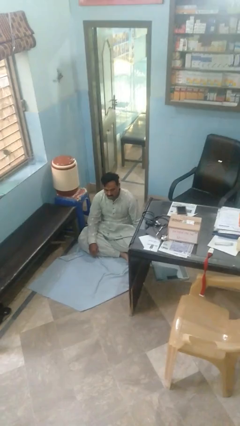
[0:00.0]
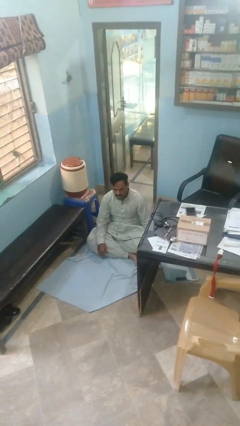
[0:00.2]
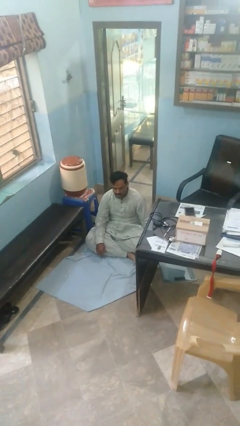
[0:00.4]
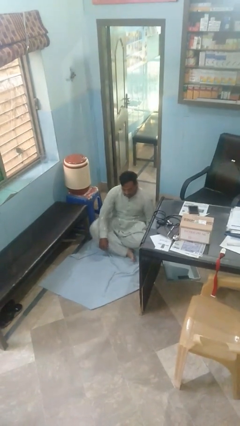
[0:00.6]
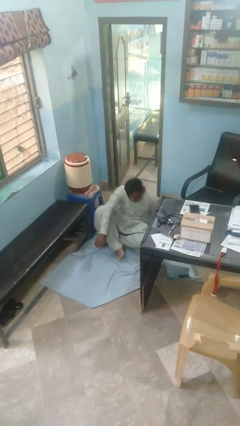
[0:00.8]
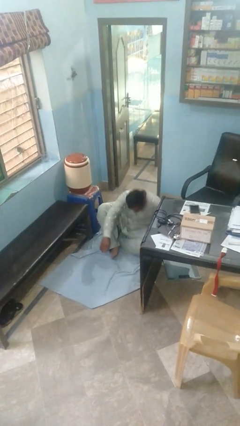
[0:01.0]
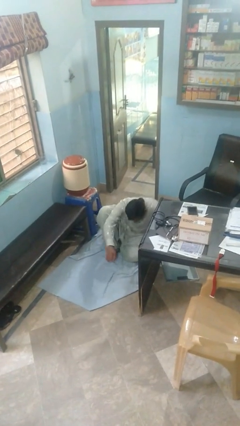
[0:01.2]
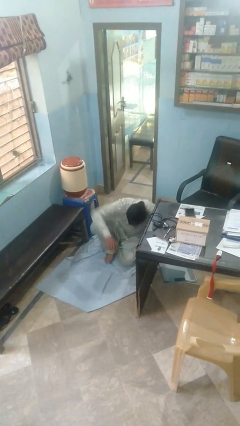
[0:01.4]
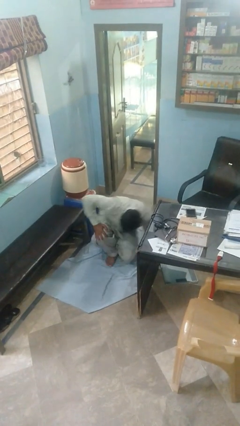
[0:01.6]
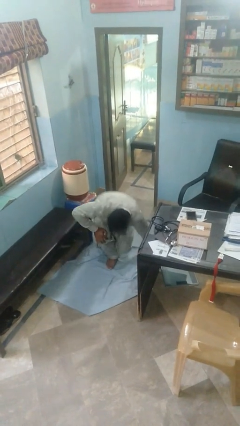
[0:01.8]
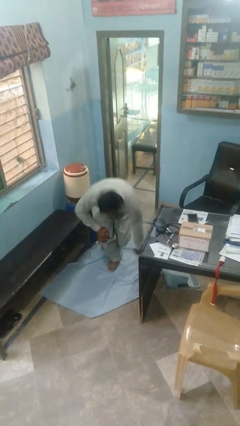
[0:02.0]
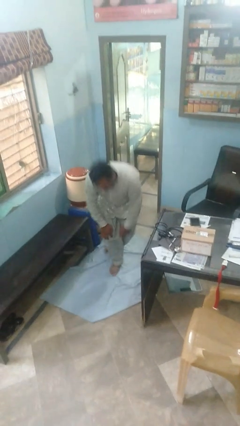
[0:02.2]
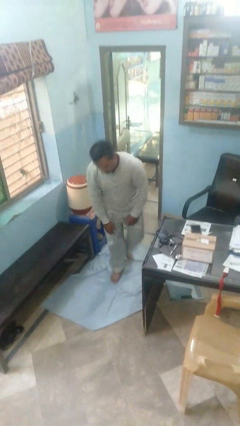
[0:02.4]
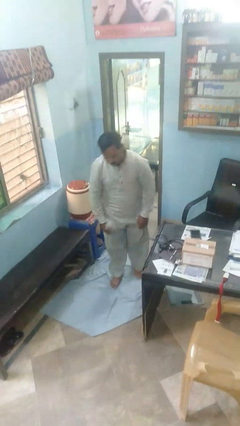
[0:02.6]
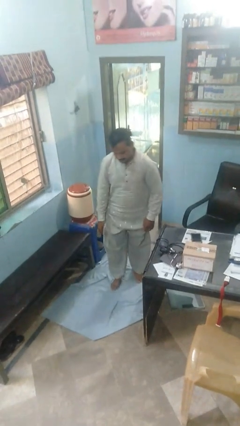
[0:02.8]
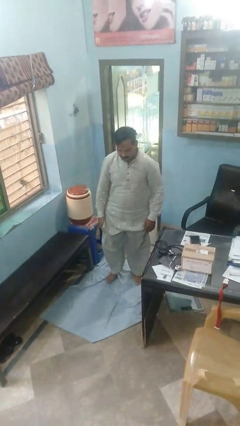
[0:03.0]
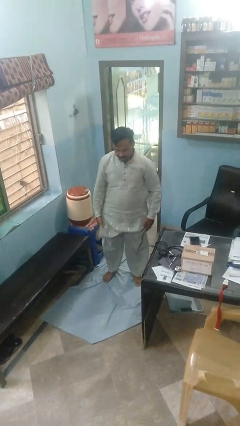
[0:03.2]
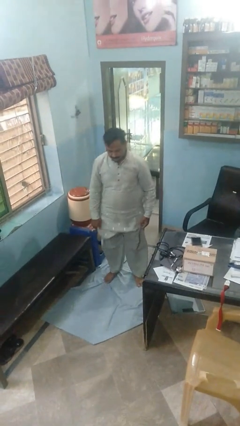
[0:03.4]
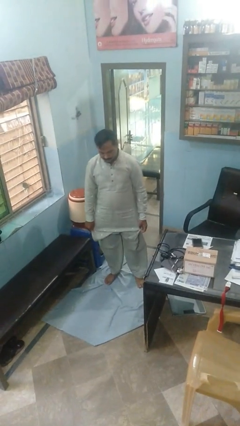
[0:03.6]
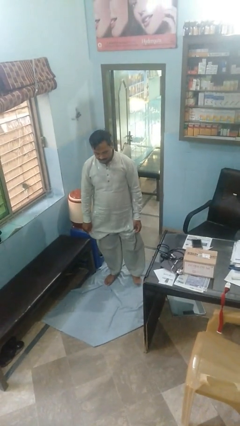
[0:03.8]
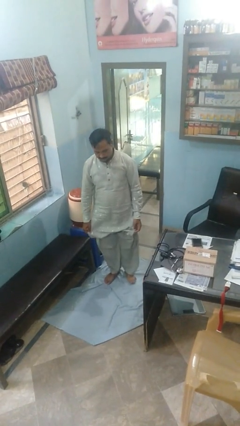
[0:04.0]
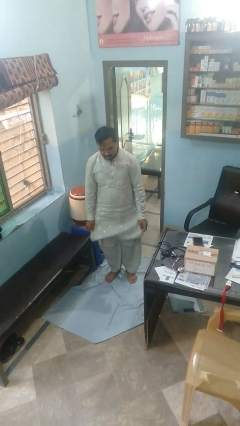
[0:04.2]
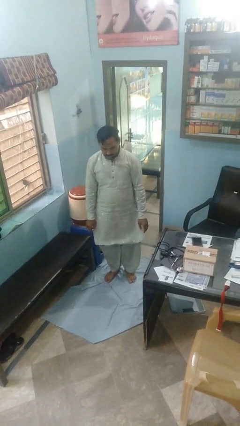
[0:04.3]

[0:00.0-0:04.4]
person stands up from floor

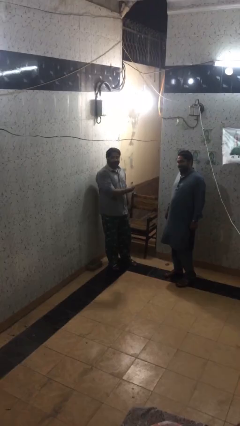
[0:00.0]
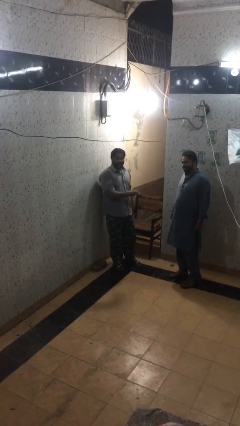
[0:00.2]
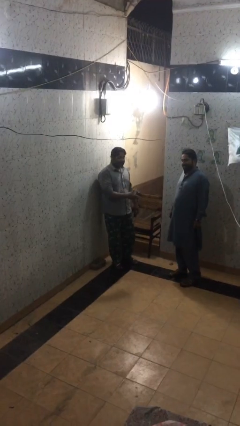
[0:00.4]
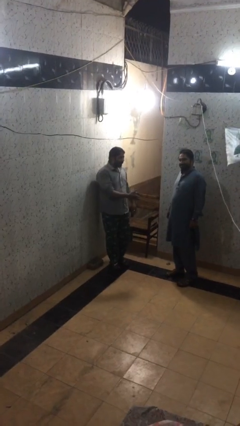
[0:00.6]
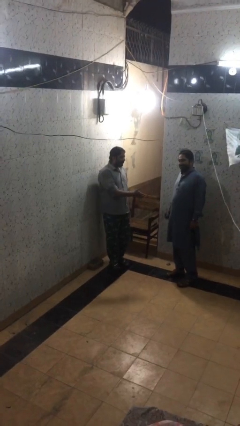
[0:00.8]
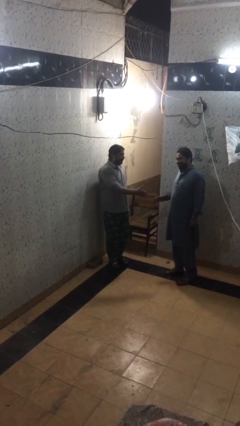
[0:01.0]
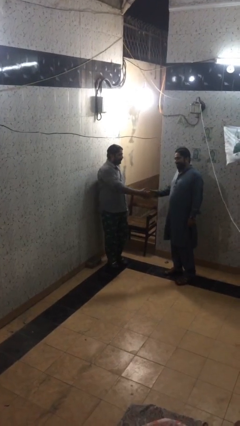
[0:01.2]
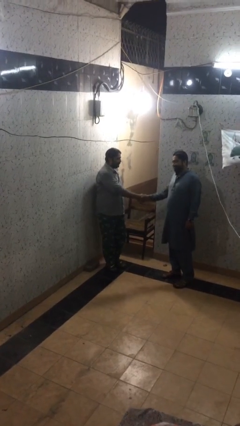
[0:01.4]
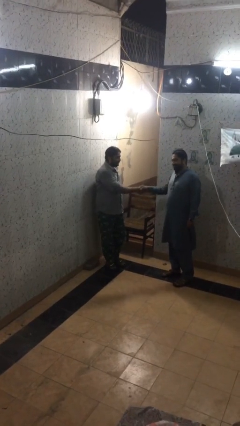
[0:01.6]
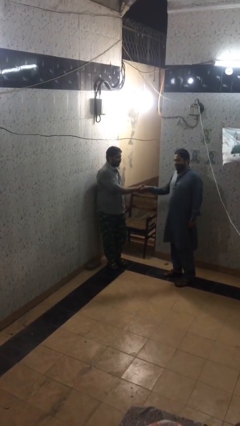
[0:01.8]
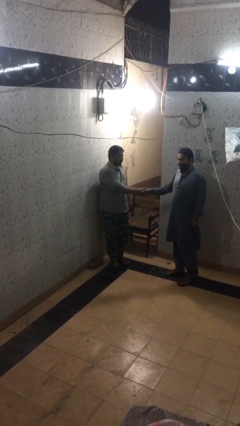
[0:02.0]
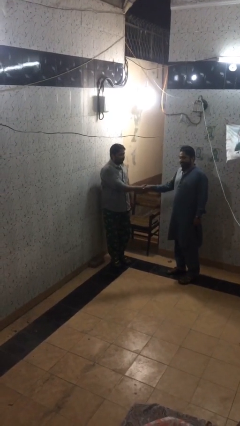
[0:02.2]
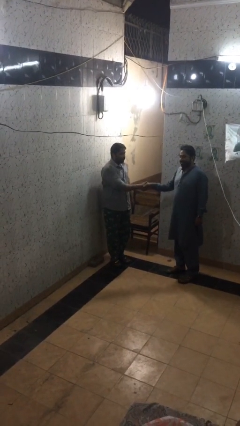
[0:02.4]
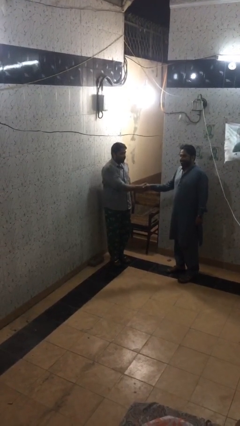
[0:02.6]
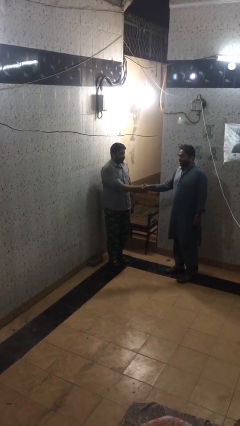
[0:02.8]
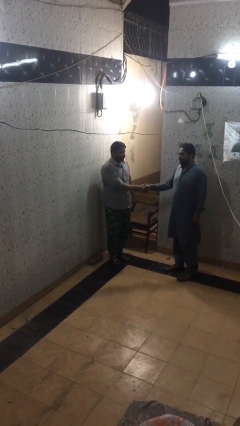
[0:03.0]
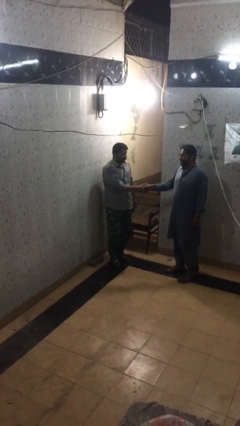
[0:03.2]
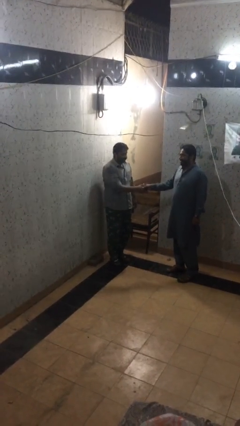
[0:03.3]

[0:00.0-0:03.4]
person shakes hand

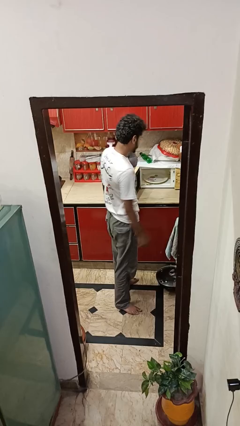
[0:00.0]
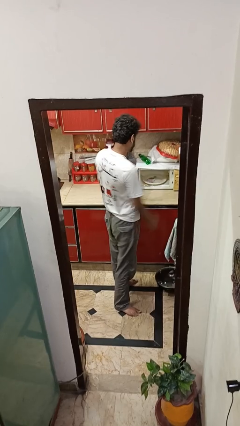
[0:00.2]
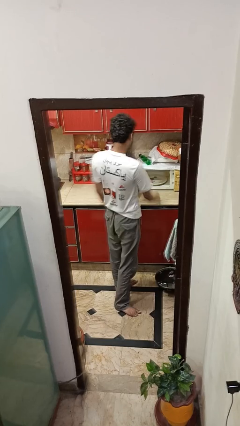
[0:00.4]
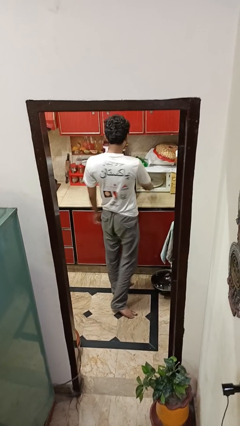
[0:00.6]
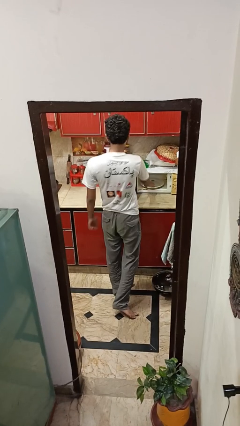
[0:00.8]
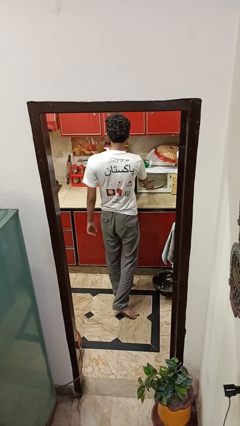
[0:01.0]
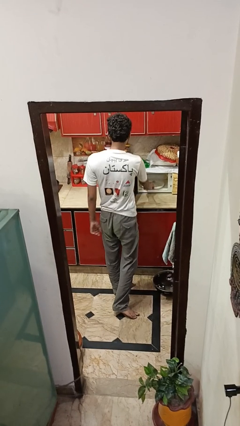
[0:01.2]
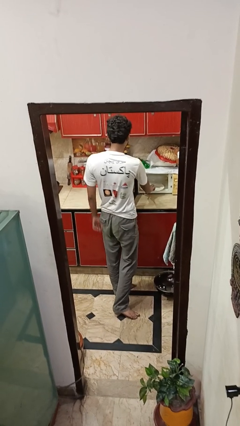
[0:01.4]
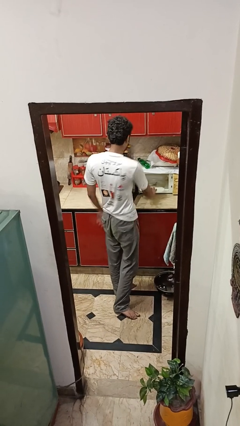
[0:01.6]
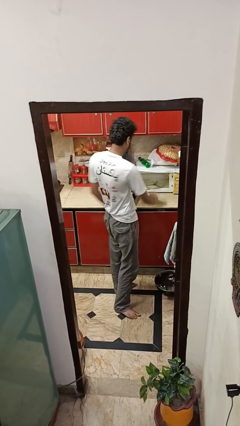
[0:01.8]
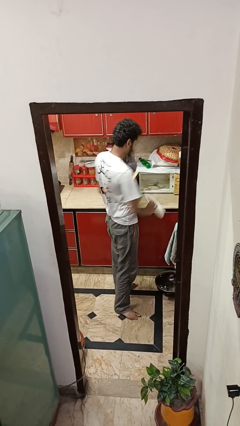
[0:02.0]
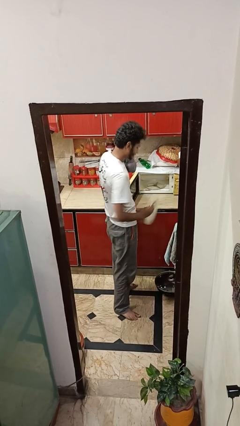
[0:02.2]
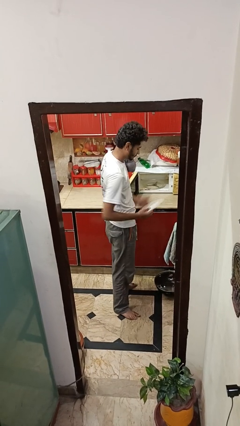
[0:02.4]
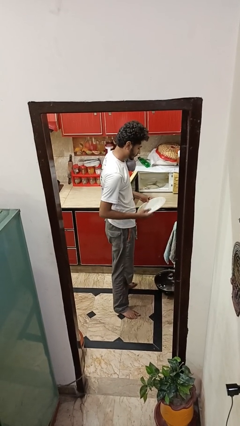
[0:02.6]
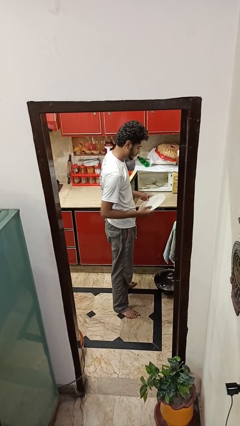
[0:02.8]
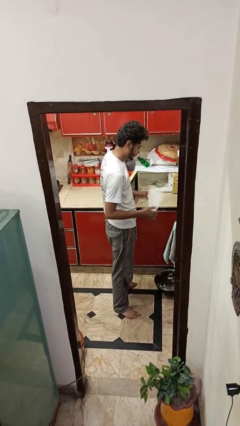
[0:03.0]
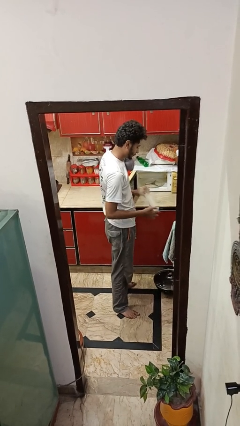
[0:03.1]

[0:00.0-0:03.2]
person takes object from oven

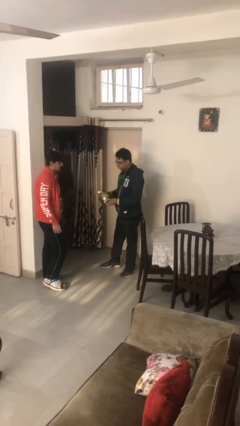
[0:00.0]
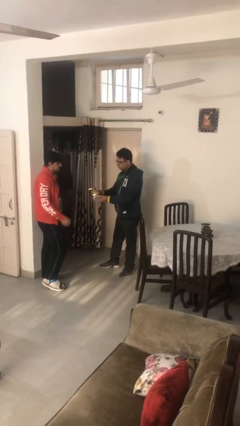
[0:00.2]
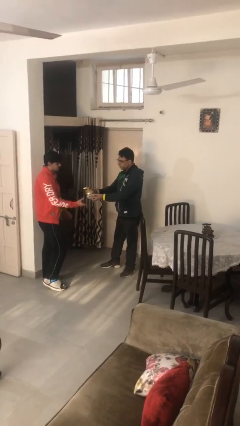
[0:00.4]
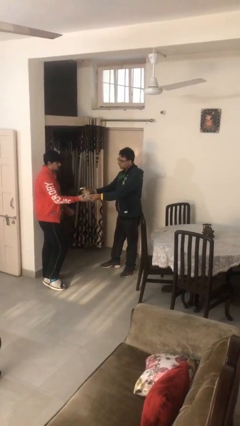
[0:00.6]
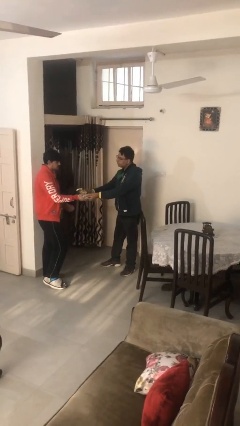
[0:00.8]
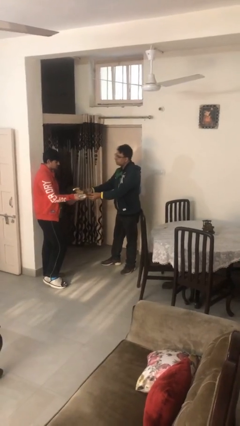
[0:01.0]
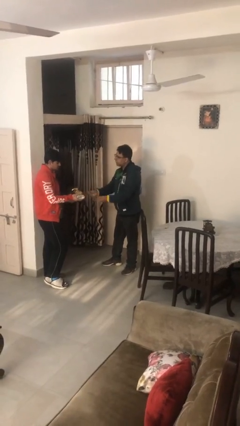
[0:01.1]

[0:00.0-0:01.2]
person transfers object to person

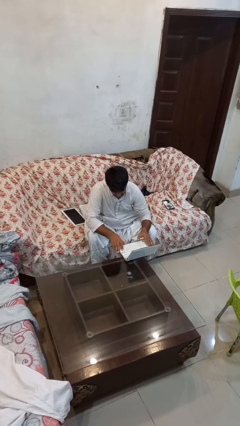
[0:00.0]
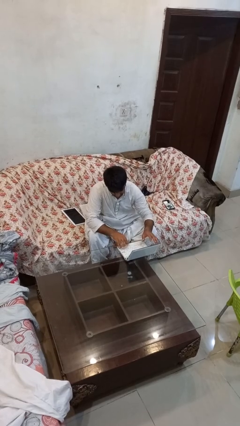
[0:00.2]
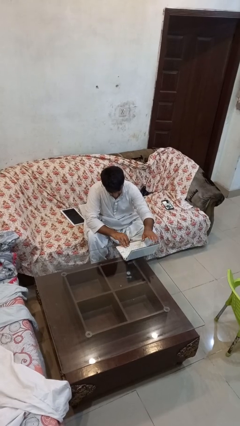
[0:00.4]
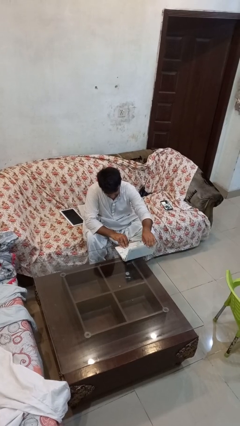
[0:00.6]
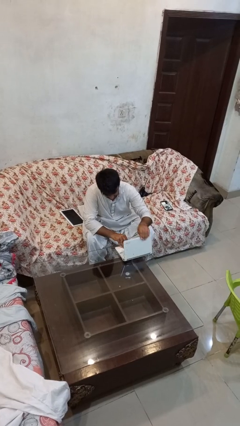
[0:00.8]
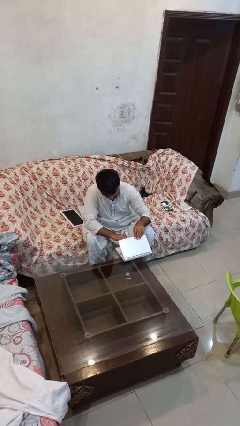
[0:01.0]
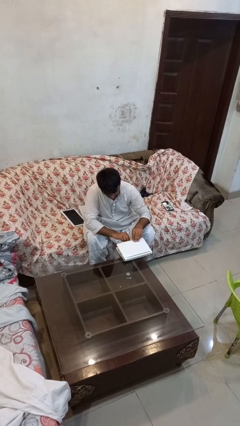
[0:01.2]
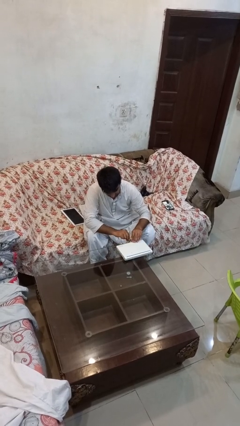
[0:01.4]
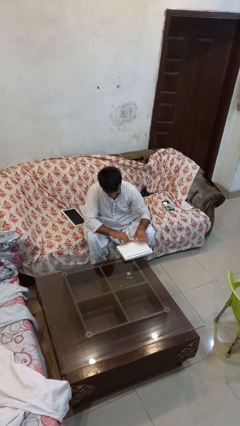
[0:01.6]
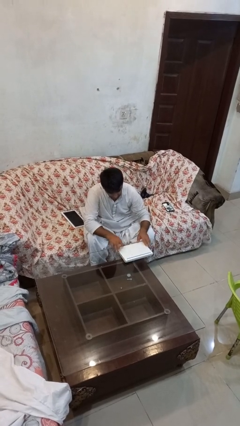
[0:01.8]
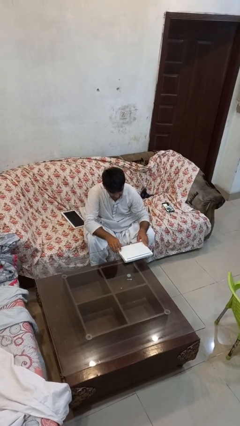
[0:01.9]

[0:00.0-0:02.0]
person closes laptop

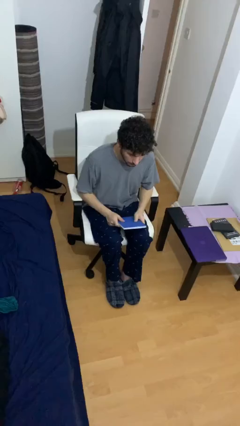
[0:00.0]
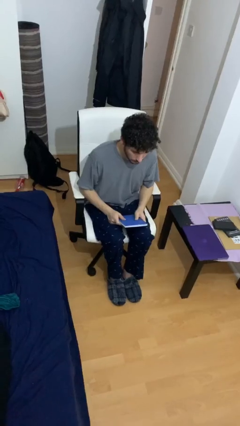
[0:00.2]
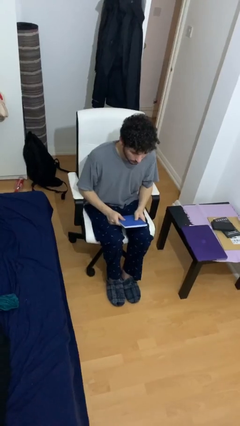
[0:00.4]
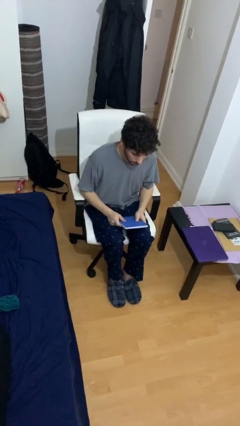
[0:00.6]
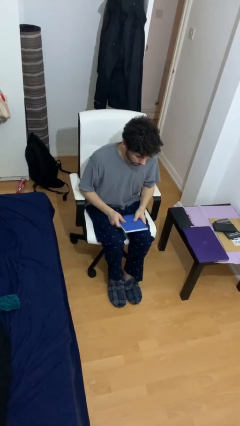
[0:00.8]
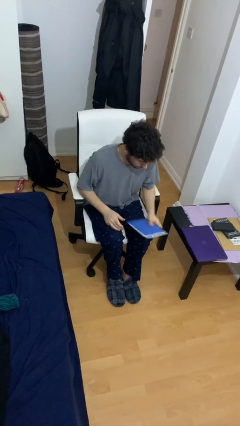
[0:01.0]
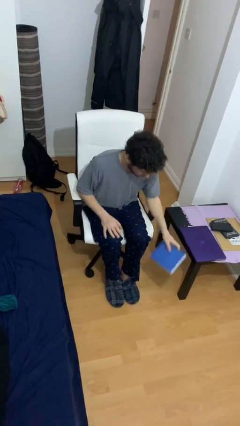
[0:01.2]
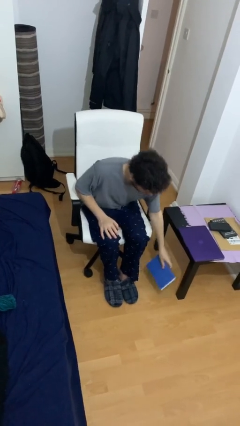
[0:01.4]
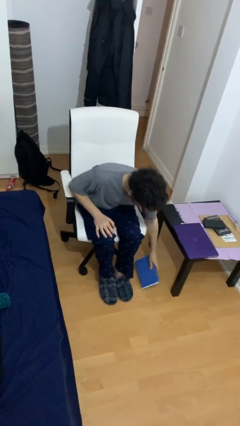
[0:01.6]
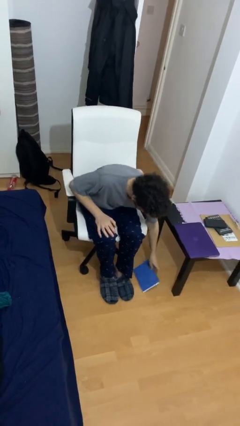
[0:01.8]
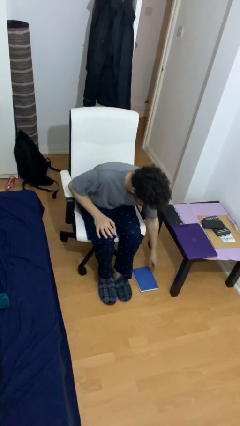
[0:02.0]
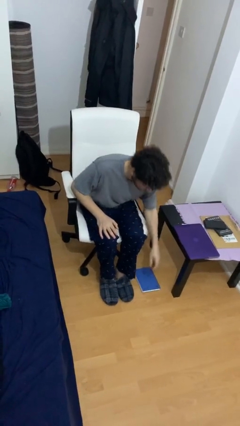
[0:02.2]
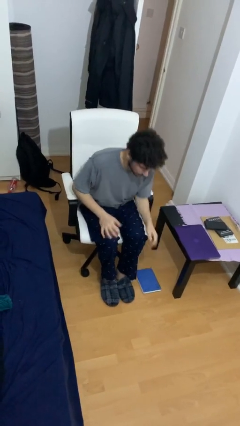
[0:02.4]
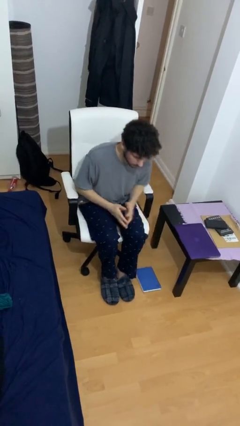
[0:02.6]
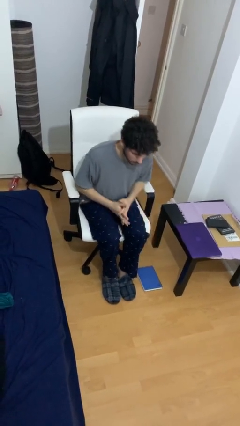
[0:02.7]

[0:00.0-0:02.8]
person puts down object on floor

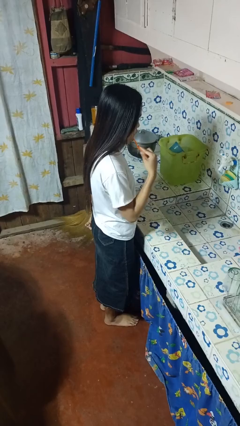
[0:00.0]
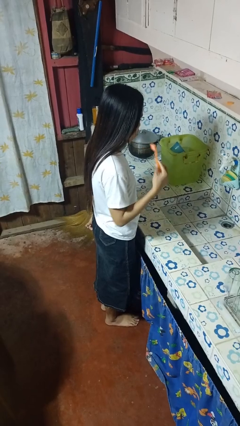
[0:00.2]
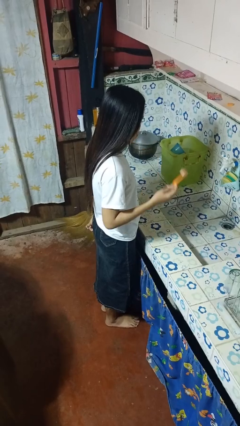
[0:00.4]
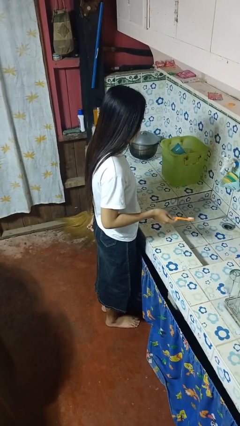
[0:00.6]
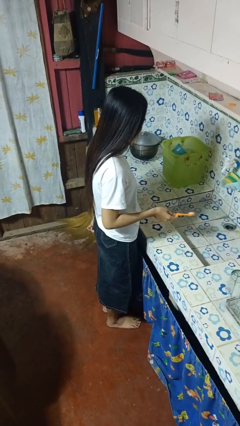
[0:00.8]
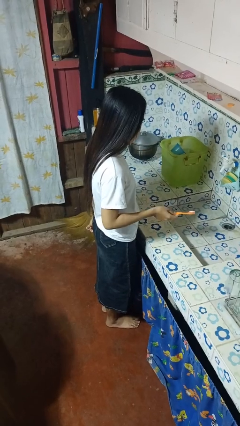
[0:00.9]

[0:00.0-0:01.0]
person brushes teeth
